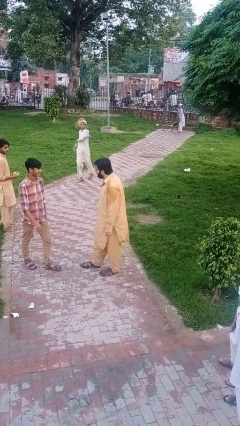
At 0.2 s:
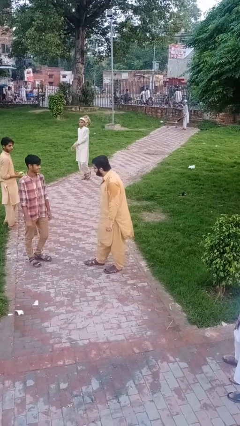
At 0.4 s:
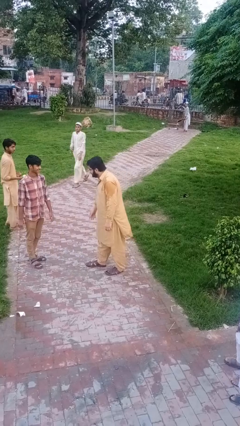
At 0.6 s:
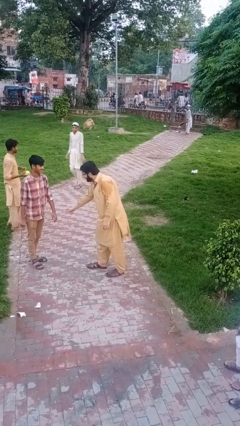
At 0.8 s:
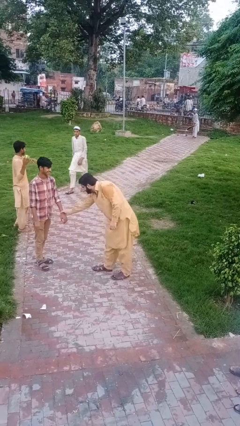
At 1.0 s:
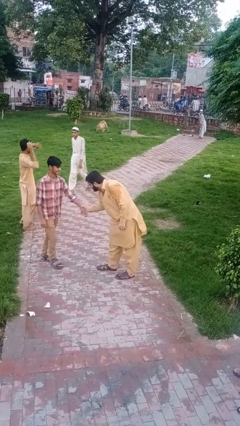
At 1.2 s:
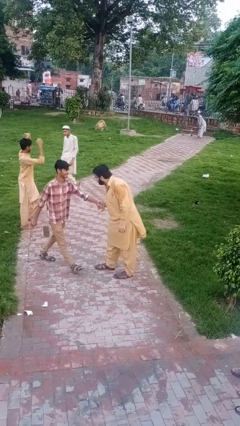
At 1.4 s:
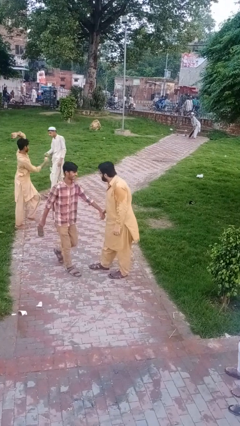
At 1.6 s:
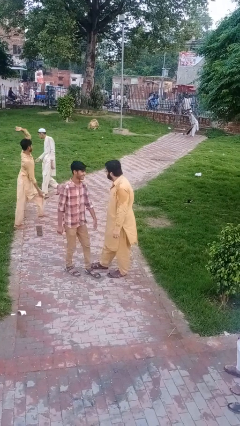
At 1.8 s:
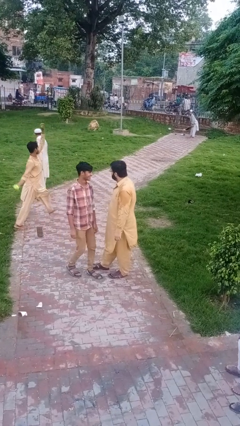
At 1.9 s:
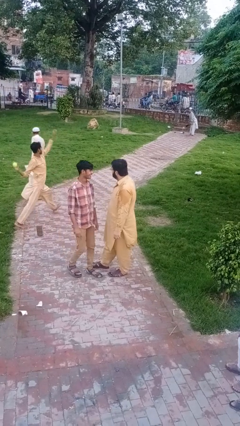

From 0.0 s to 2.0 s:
person grabs person by forearm

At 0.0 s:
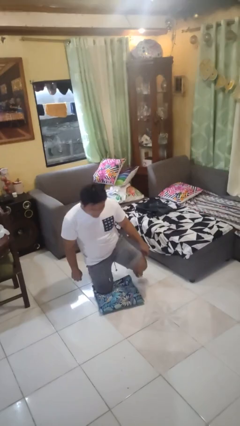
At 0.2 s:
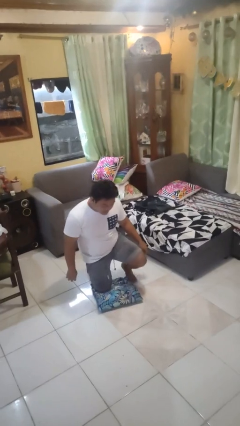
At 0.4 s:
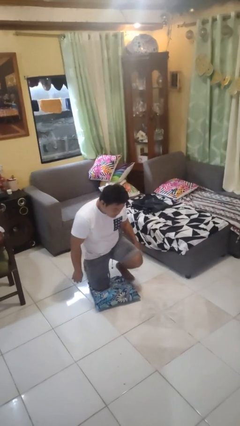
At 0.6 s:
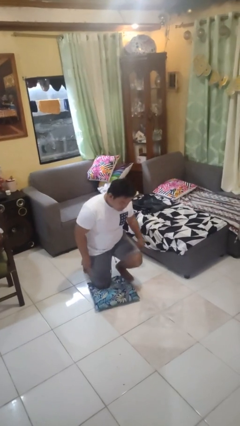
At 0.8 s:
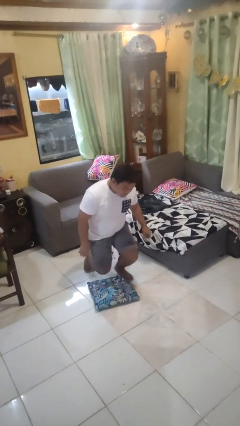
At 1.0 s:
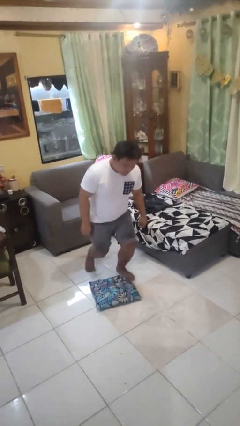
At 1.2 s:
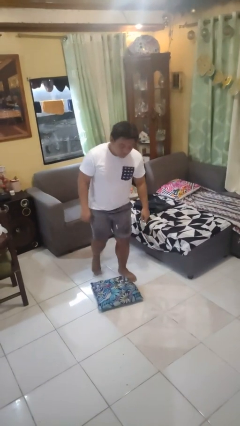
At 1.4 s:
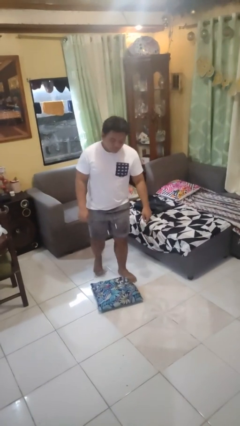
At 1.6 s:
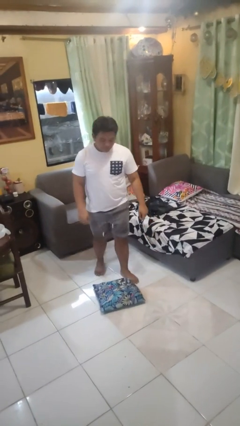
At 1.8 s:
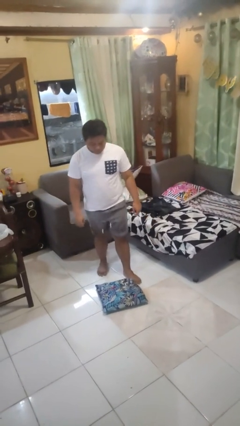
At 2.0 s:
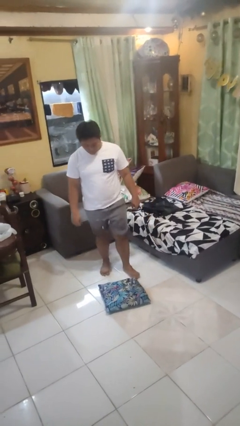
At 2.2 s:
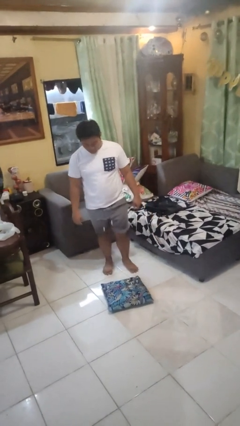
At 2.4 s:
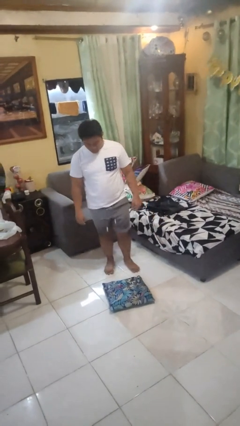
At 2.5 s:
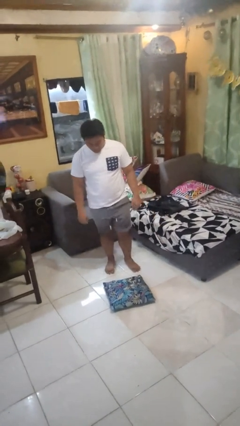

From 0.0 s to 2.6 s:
person stands up from floor

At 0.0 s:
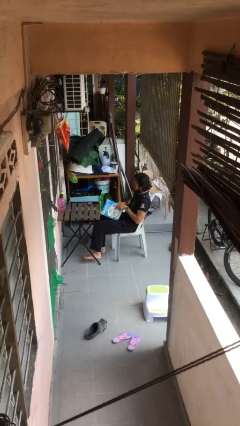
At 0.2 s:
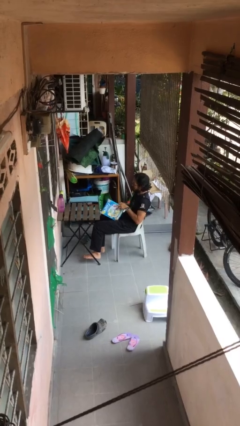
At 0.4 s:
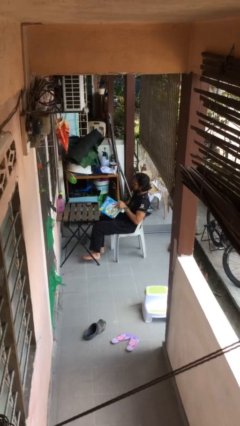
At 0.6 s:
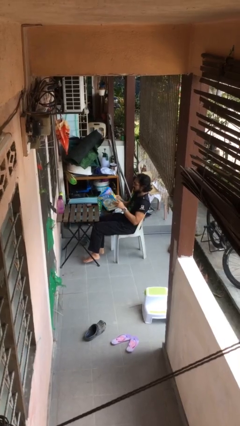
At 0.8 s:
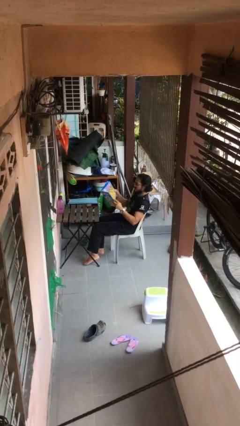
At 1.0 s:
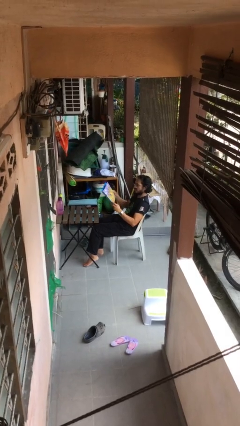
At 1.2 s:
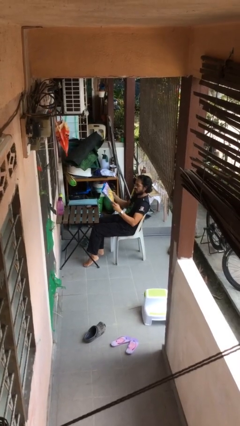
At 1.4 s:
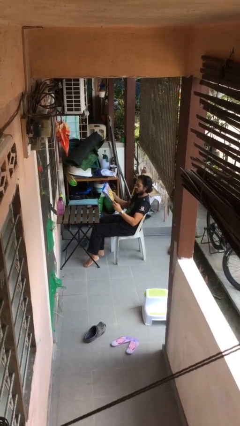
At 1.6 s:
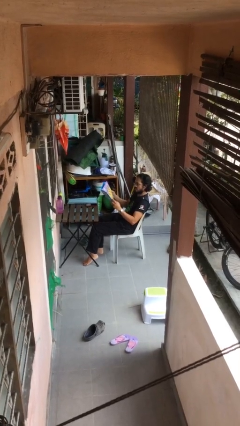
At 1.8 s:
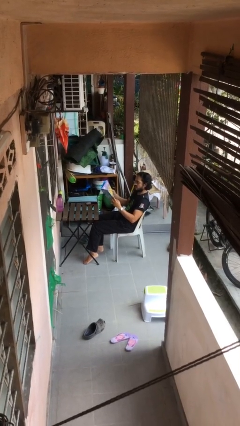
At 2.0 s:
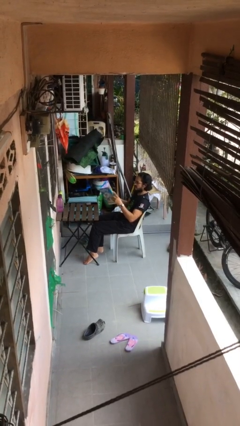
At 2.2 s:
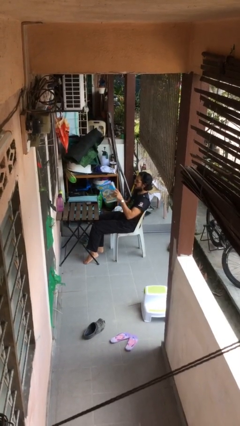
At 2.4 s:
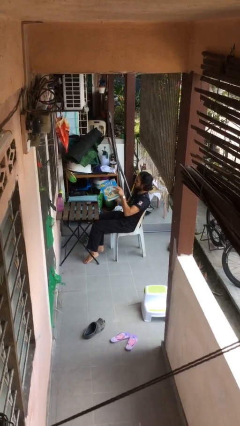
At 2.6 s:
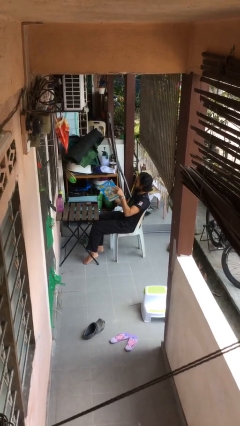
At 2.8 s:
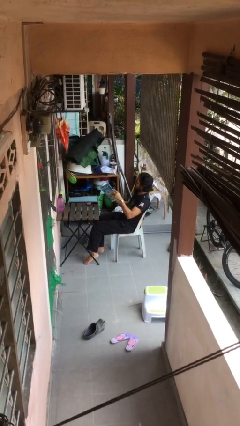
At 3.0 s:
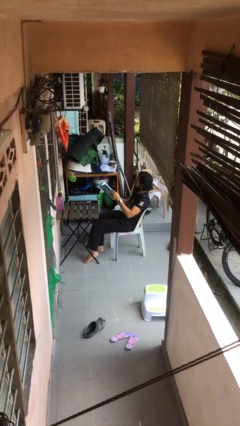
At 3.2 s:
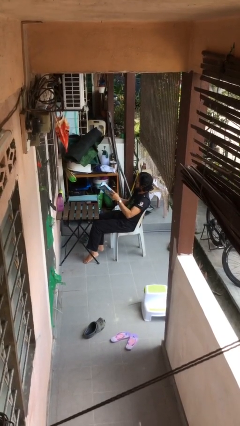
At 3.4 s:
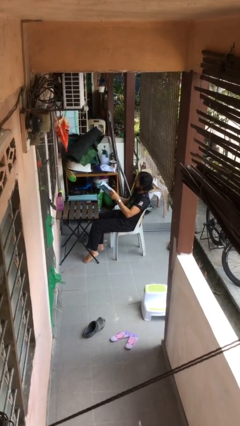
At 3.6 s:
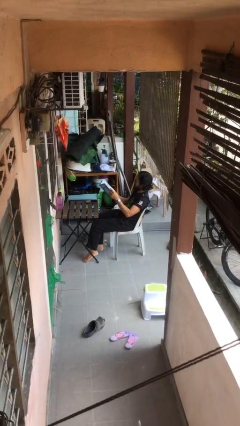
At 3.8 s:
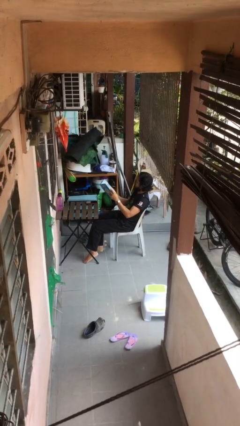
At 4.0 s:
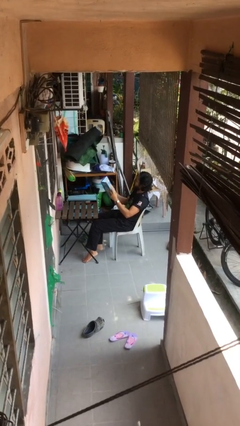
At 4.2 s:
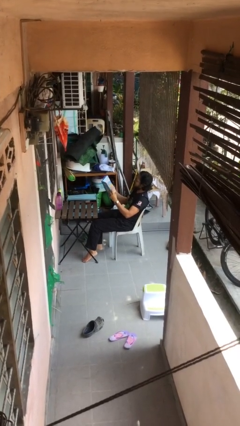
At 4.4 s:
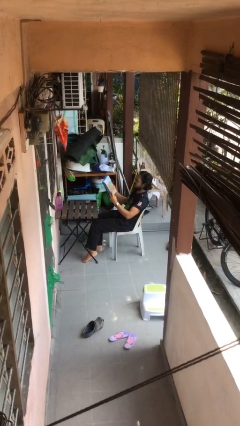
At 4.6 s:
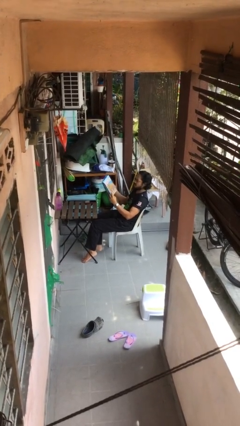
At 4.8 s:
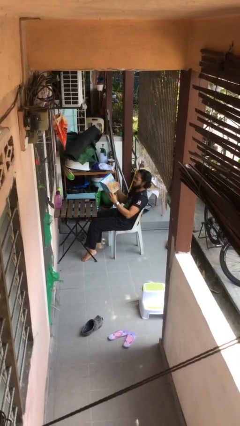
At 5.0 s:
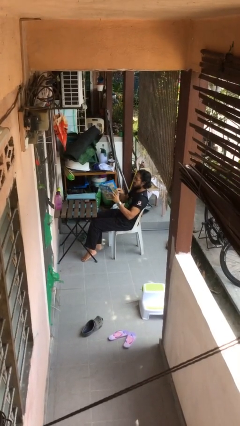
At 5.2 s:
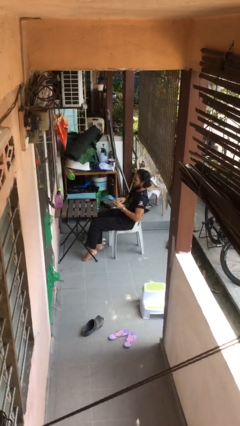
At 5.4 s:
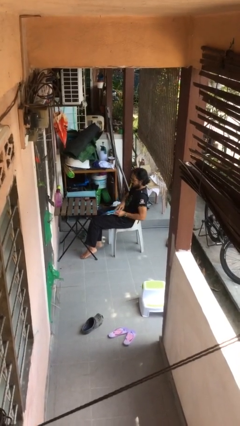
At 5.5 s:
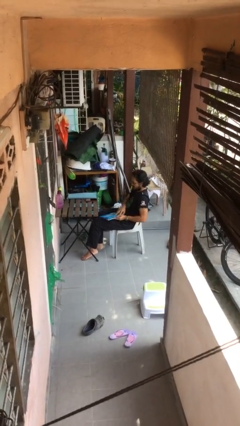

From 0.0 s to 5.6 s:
person reads document

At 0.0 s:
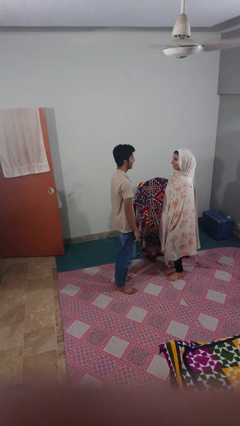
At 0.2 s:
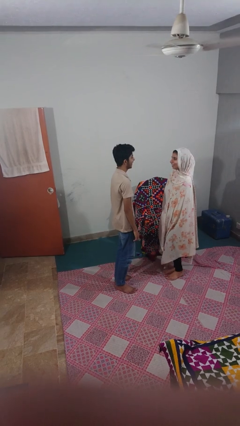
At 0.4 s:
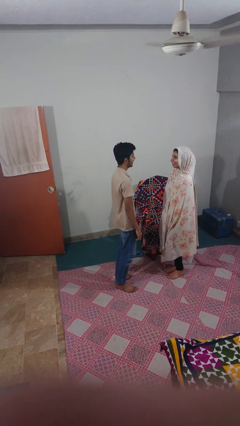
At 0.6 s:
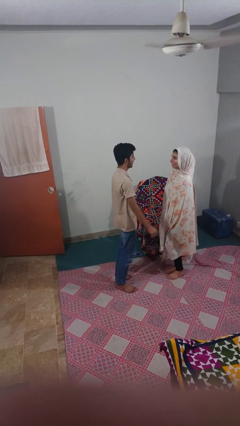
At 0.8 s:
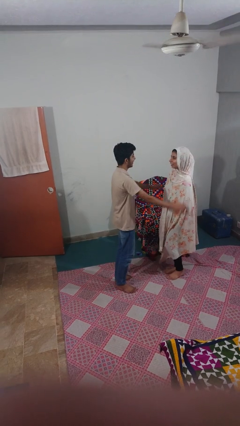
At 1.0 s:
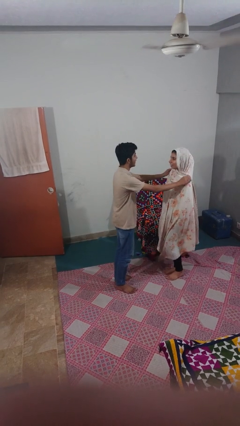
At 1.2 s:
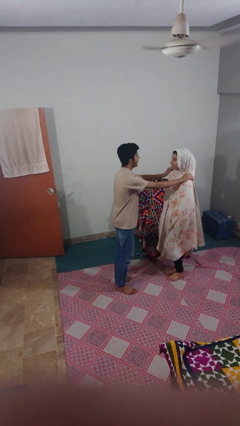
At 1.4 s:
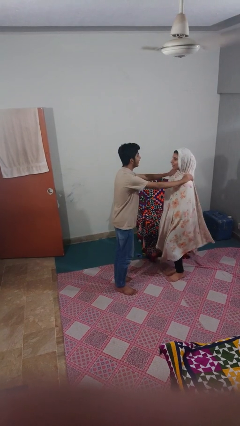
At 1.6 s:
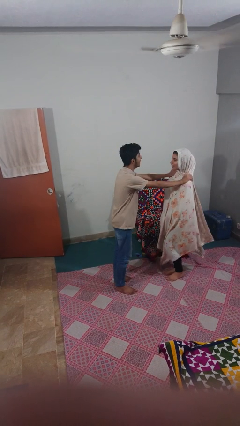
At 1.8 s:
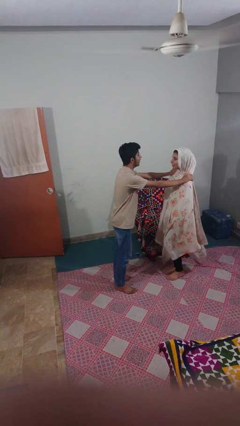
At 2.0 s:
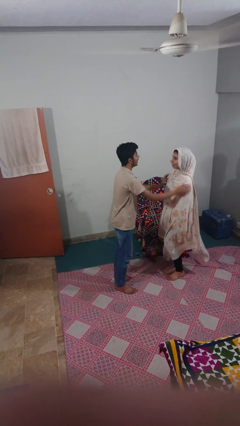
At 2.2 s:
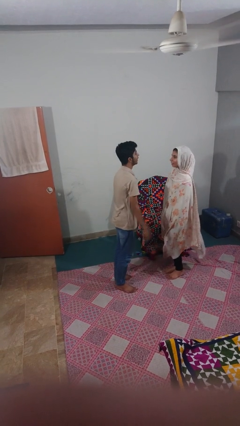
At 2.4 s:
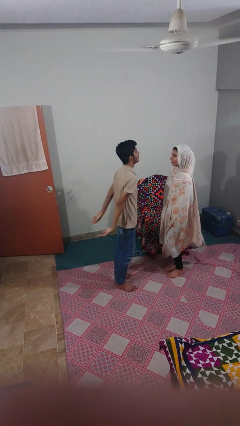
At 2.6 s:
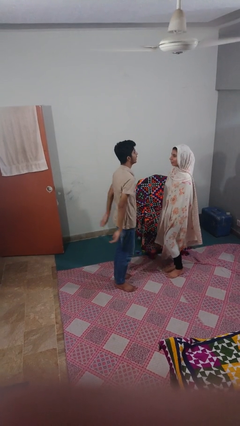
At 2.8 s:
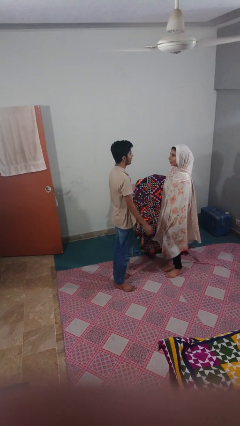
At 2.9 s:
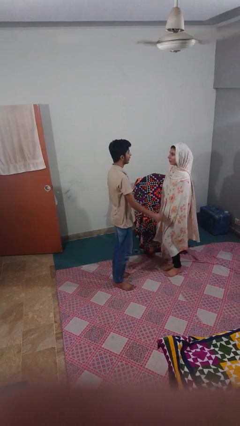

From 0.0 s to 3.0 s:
person pounds shoulders of person

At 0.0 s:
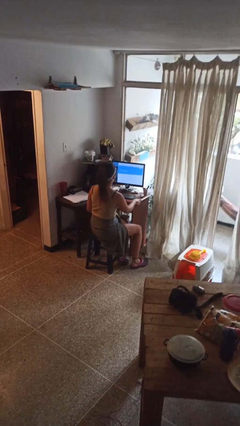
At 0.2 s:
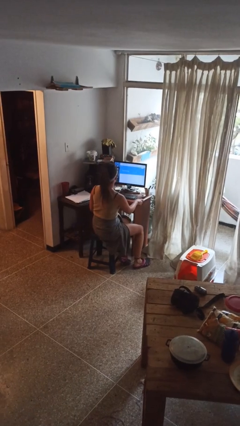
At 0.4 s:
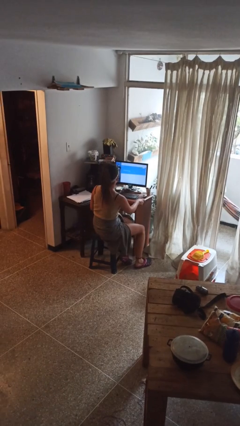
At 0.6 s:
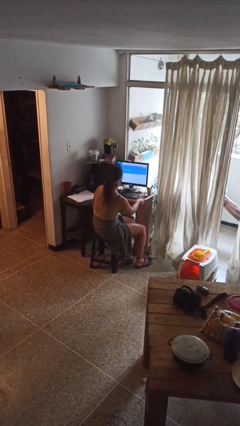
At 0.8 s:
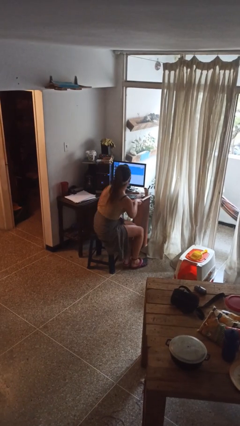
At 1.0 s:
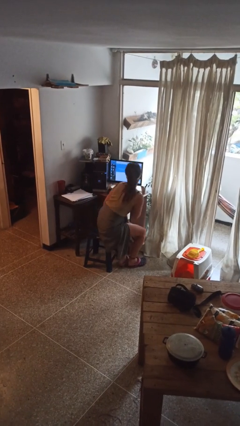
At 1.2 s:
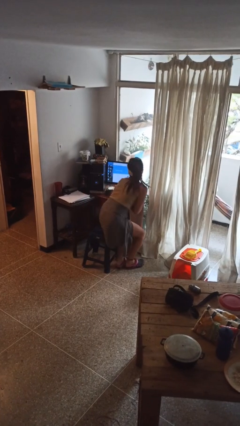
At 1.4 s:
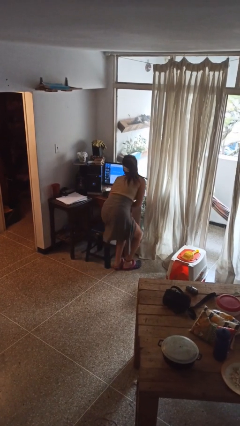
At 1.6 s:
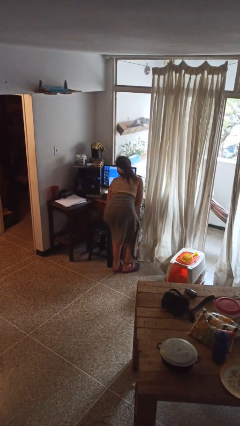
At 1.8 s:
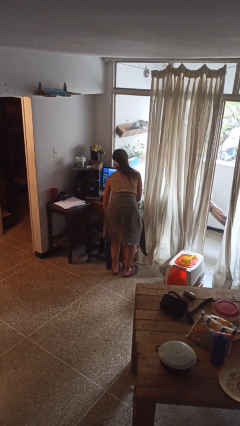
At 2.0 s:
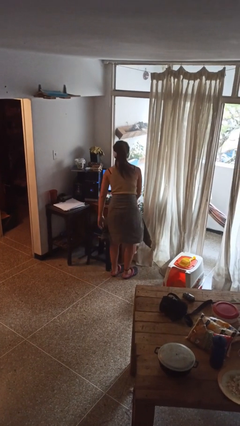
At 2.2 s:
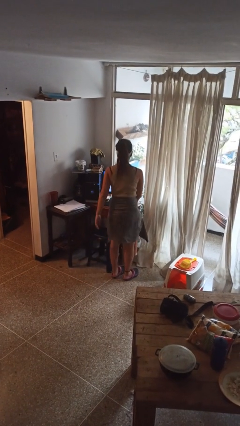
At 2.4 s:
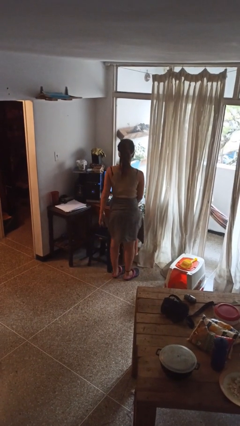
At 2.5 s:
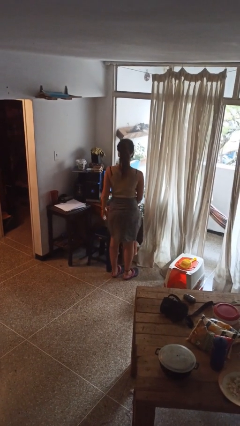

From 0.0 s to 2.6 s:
person stands up

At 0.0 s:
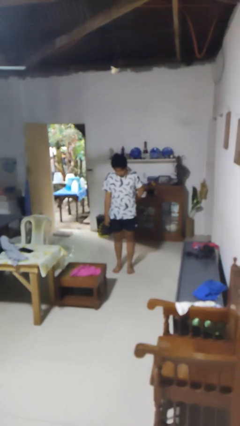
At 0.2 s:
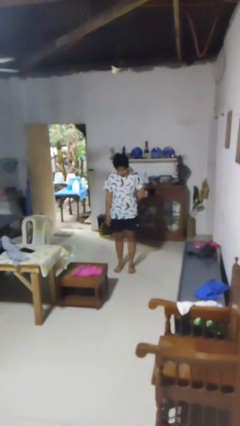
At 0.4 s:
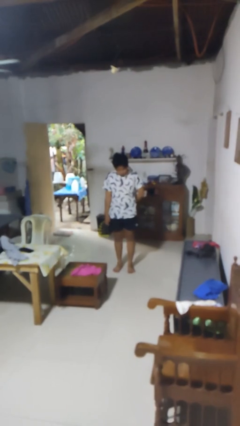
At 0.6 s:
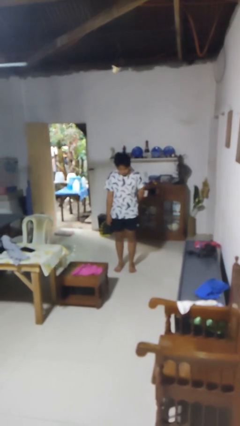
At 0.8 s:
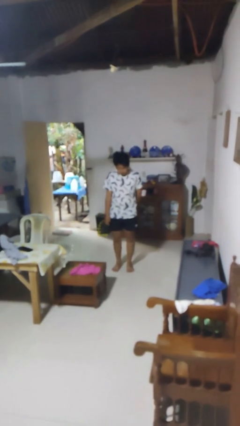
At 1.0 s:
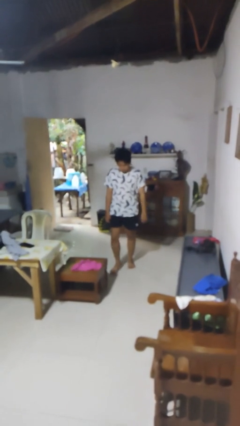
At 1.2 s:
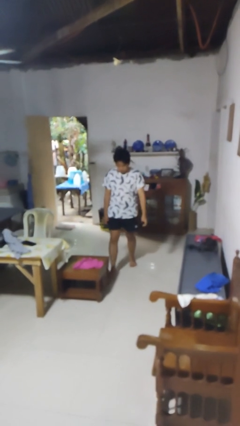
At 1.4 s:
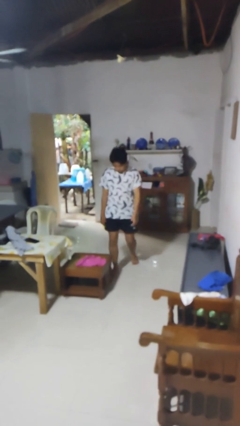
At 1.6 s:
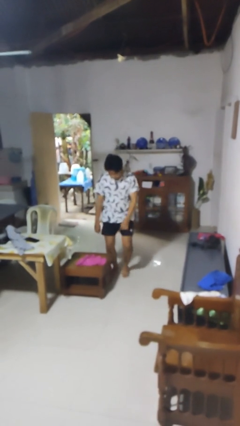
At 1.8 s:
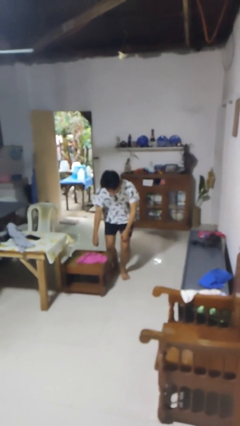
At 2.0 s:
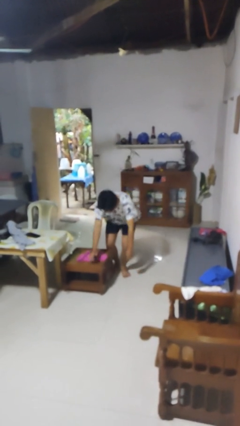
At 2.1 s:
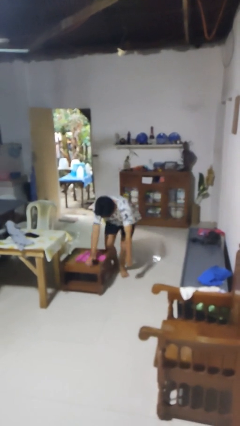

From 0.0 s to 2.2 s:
person trips on object on floor
